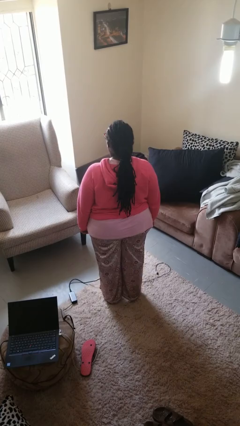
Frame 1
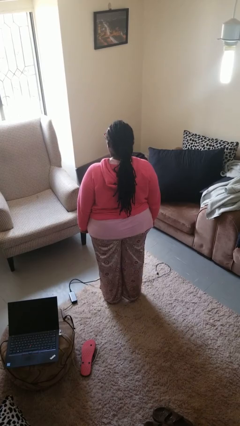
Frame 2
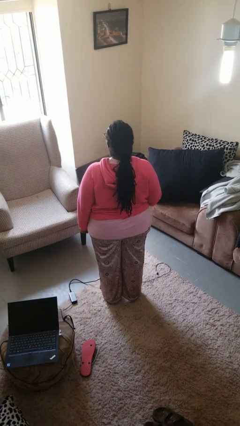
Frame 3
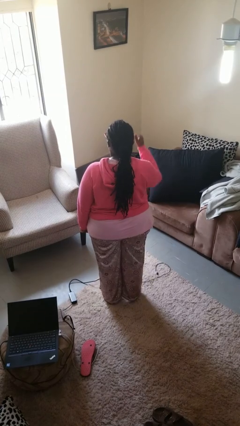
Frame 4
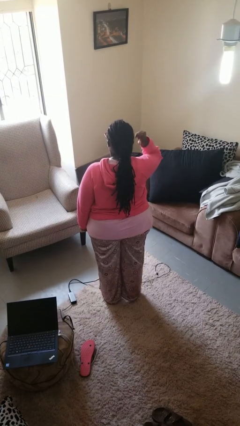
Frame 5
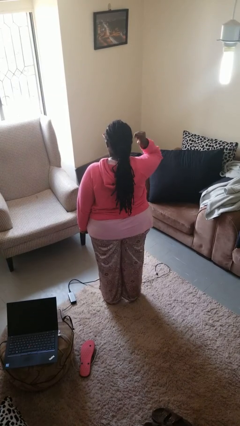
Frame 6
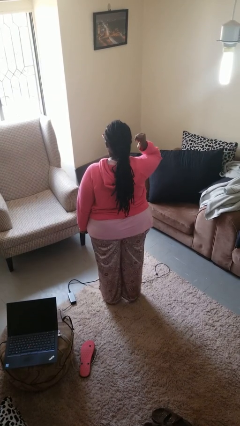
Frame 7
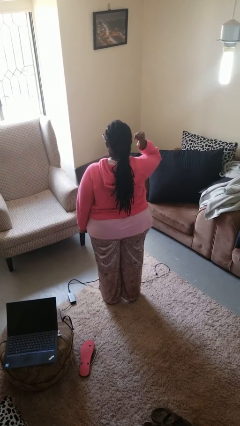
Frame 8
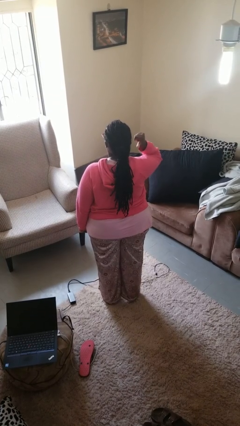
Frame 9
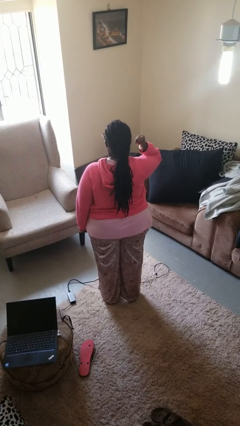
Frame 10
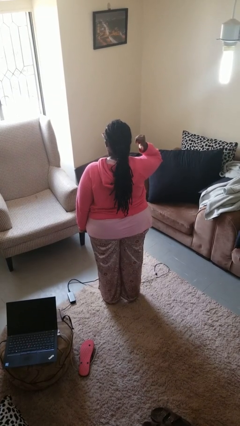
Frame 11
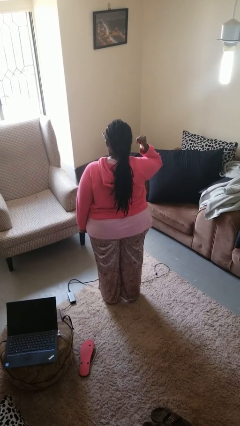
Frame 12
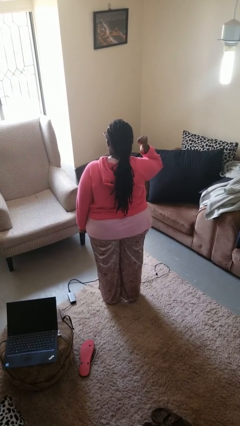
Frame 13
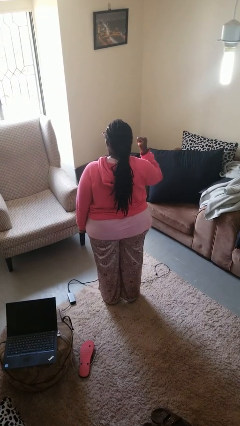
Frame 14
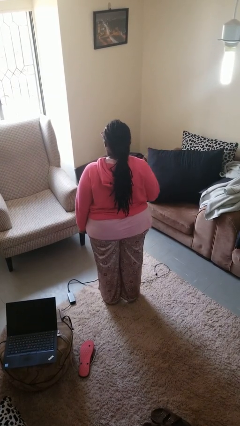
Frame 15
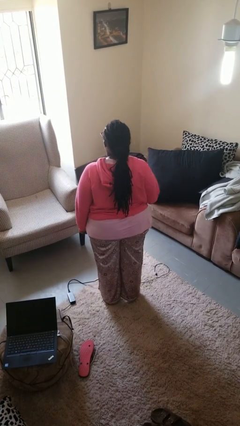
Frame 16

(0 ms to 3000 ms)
person gestures behind me

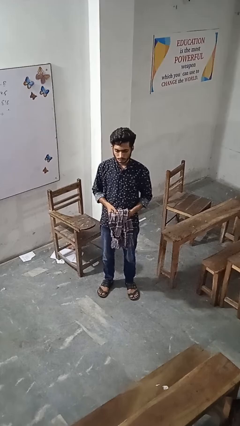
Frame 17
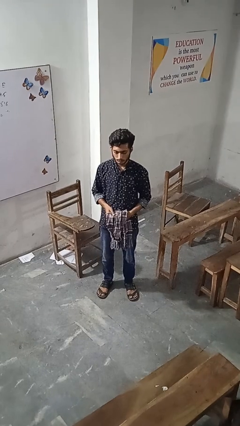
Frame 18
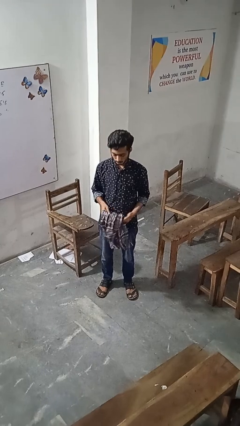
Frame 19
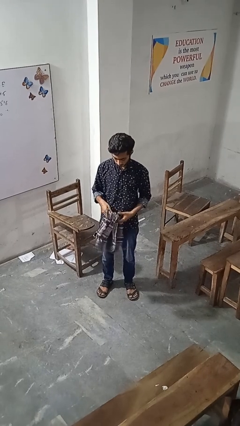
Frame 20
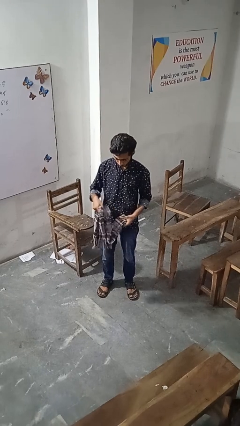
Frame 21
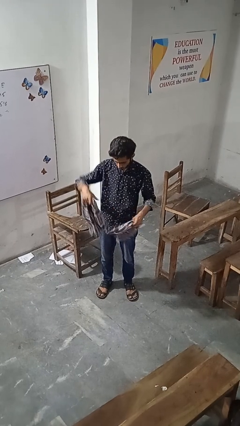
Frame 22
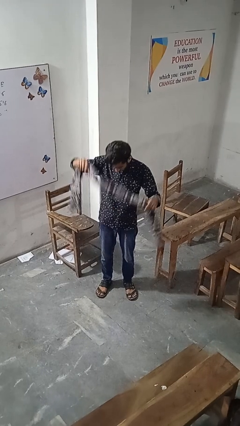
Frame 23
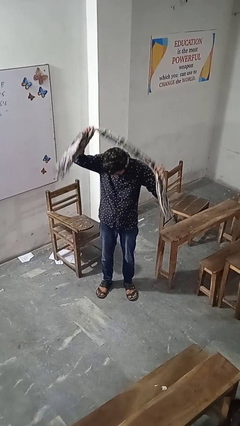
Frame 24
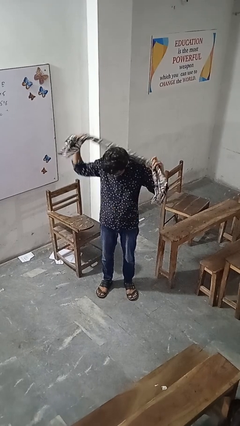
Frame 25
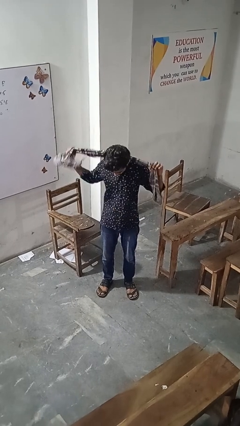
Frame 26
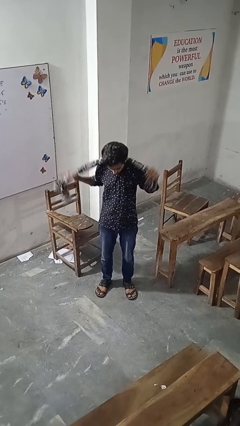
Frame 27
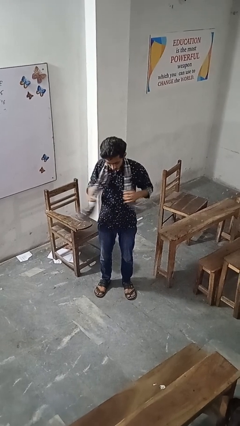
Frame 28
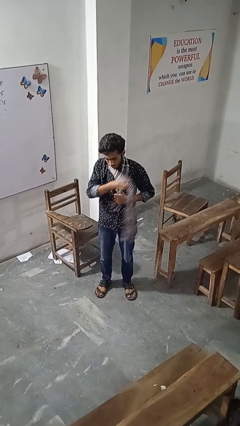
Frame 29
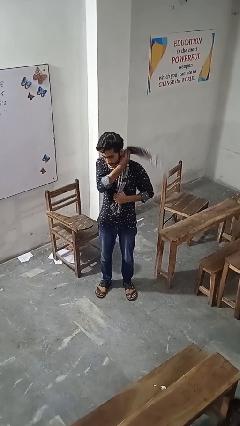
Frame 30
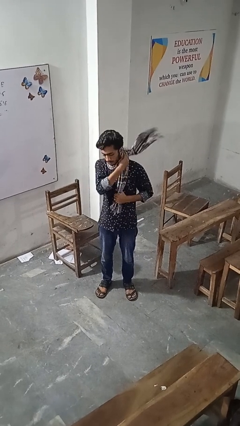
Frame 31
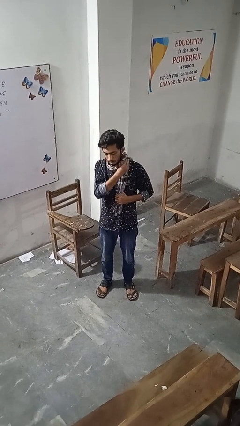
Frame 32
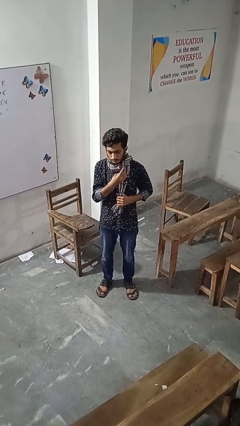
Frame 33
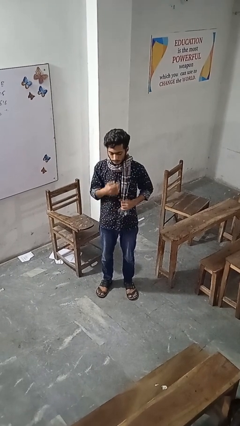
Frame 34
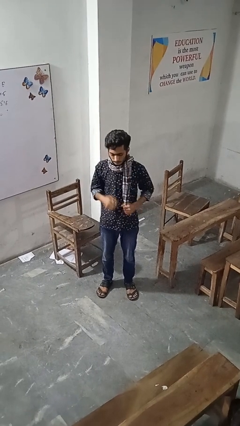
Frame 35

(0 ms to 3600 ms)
person puts on scarf

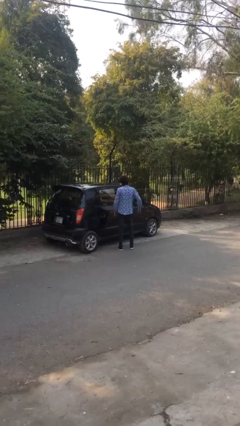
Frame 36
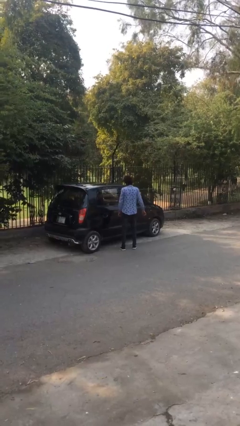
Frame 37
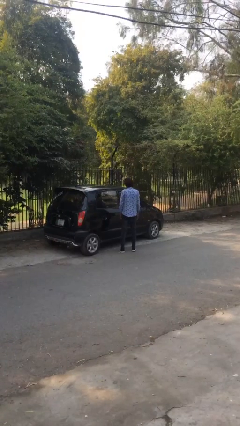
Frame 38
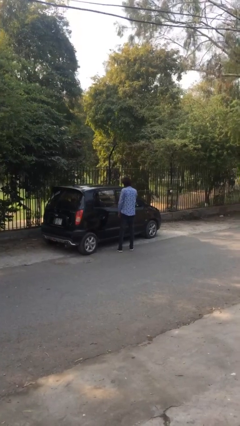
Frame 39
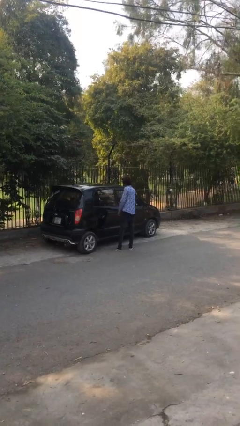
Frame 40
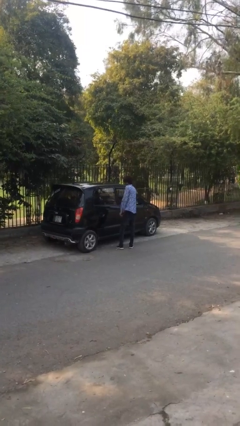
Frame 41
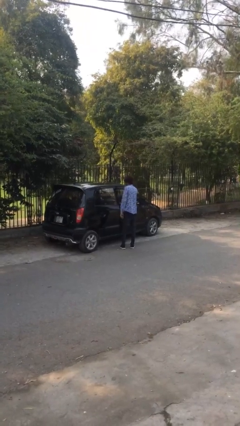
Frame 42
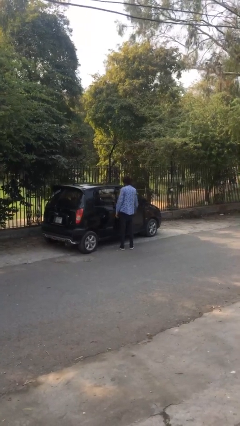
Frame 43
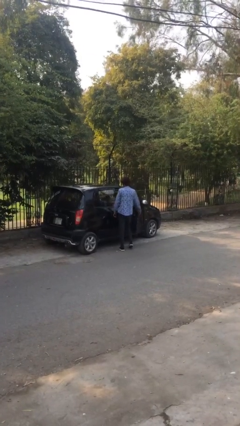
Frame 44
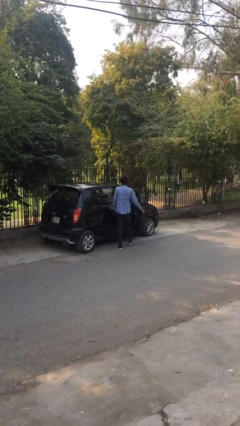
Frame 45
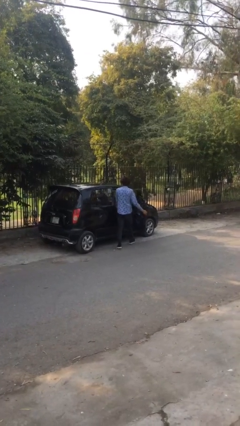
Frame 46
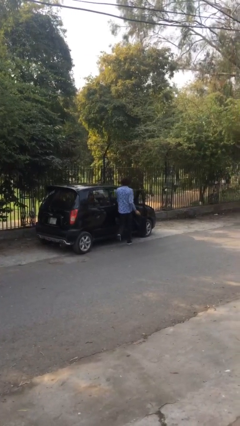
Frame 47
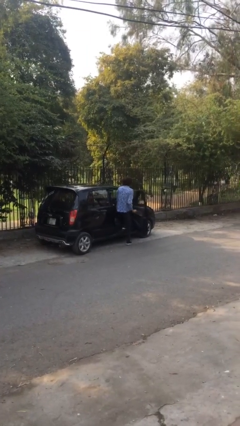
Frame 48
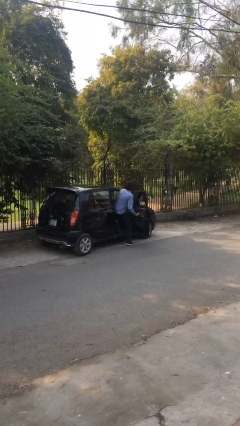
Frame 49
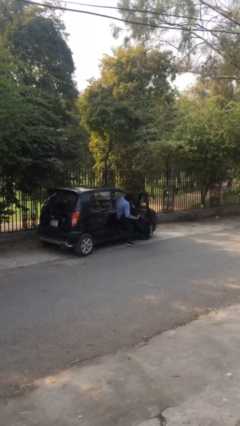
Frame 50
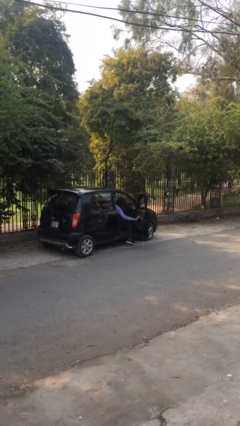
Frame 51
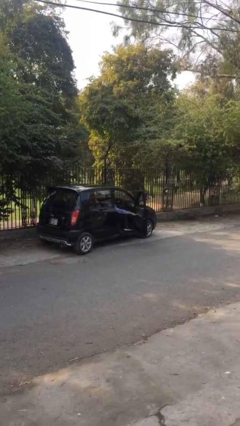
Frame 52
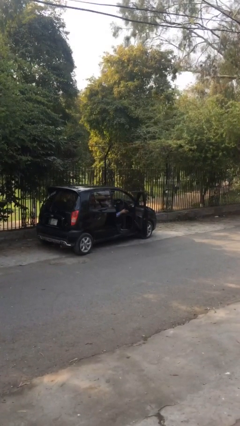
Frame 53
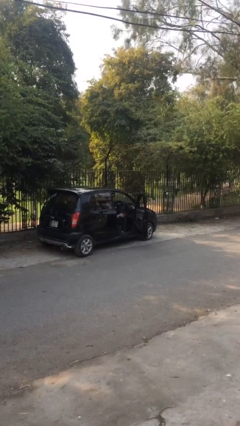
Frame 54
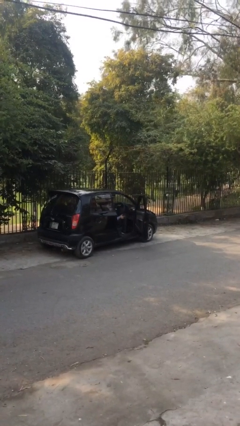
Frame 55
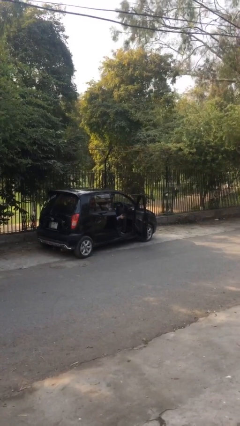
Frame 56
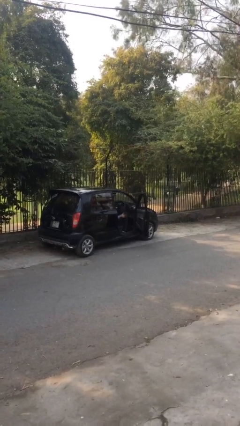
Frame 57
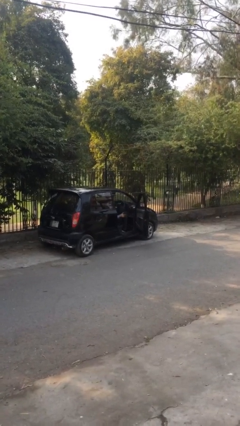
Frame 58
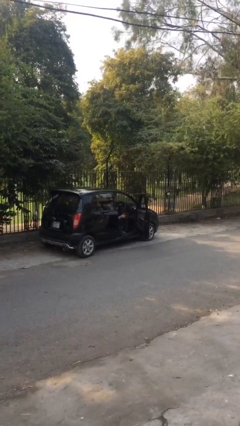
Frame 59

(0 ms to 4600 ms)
person enters car

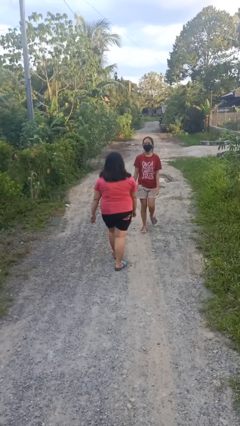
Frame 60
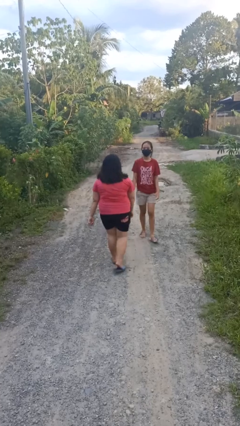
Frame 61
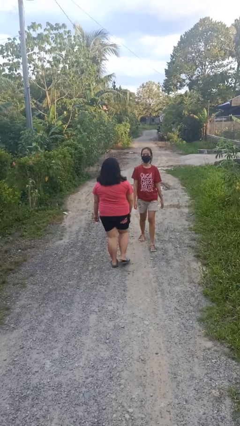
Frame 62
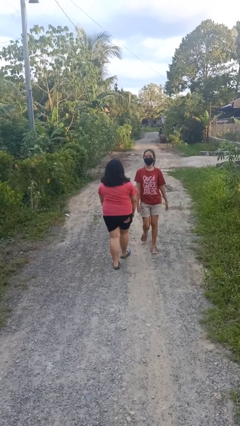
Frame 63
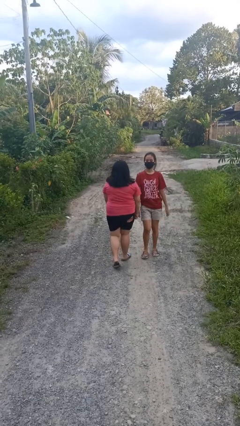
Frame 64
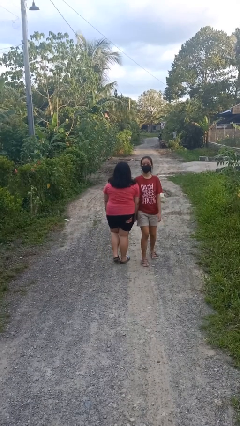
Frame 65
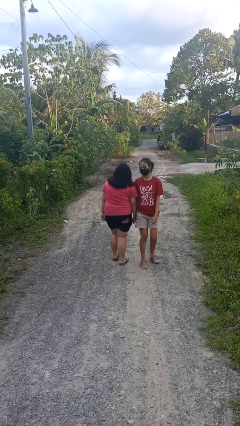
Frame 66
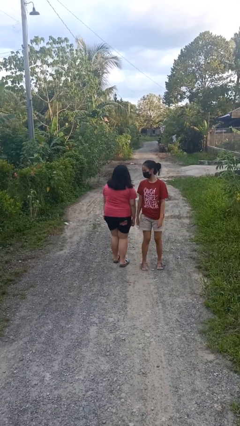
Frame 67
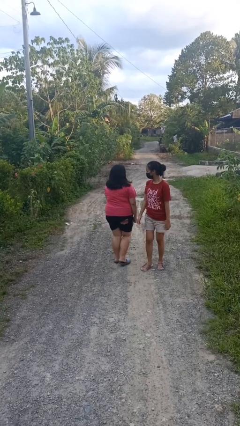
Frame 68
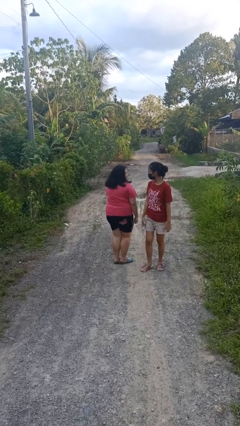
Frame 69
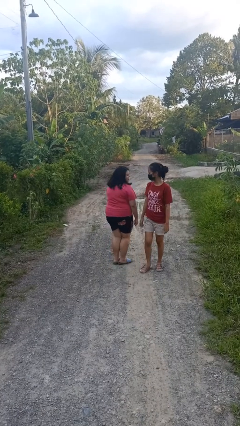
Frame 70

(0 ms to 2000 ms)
person bumps into person

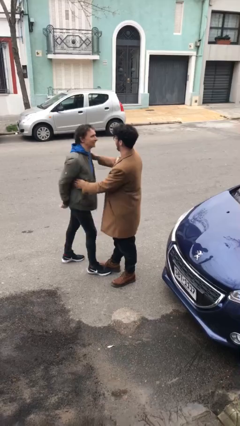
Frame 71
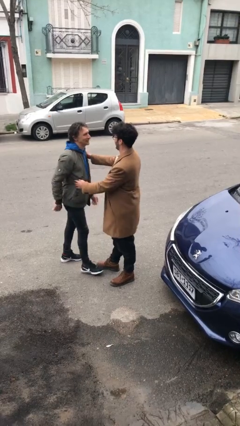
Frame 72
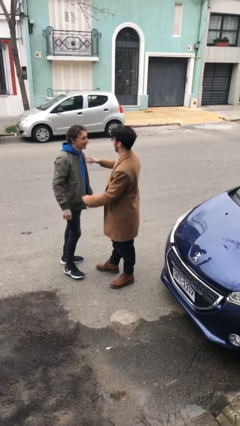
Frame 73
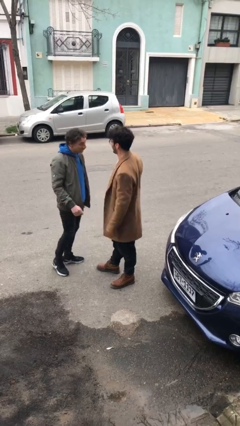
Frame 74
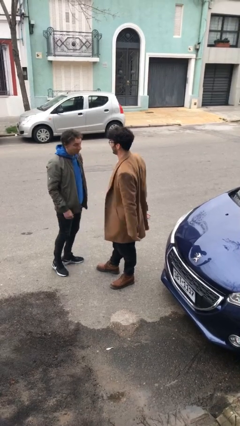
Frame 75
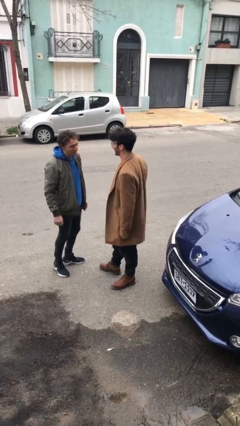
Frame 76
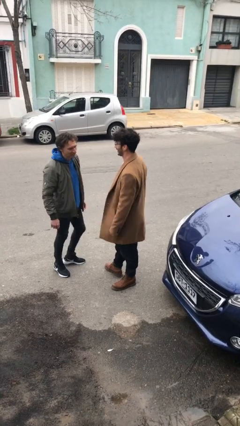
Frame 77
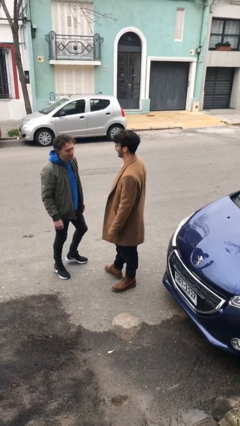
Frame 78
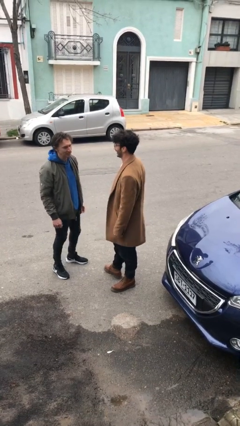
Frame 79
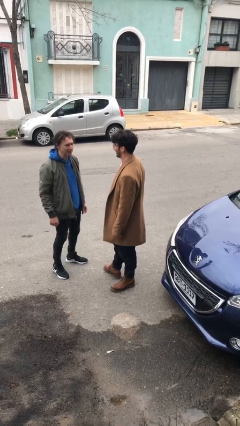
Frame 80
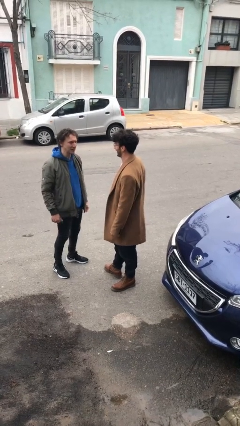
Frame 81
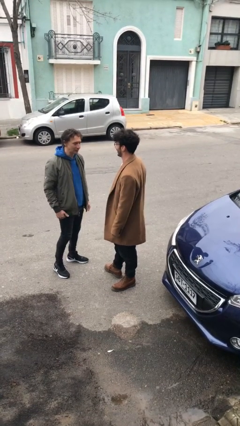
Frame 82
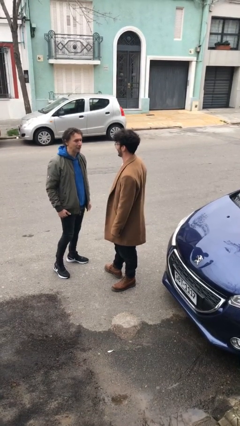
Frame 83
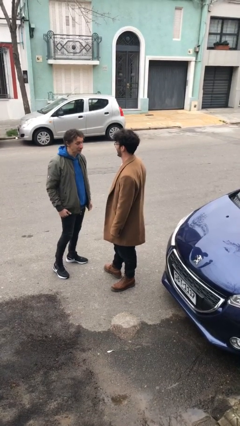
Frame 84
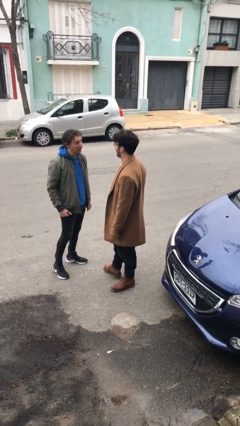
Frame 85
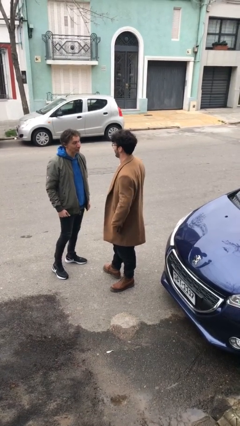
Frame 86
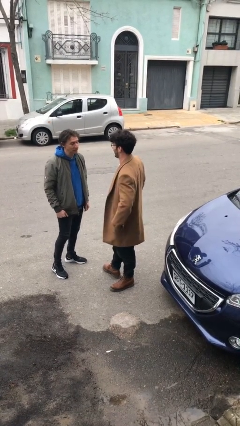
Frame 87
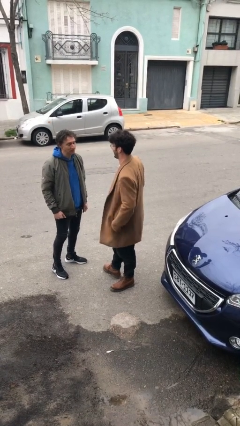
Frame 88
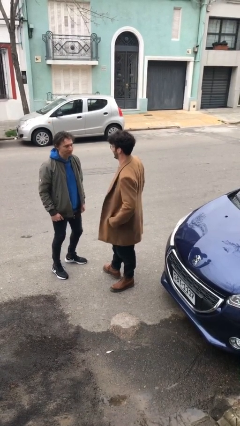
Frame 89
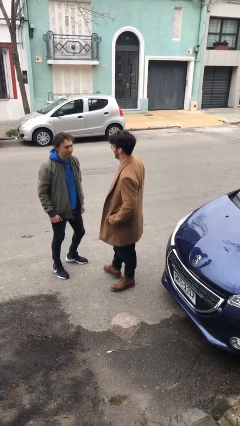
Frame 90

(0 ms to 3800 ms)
person talks to person

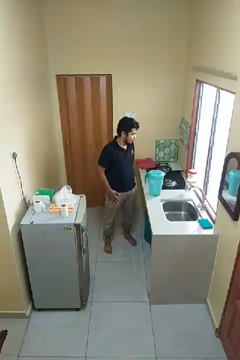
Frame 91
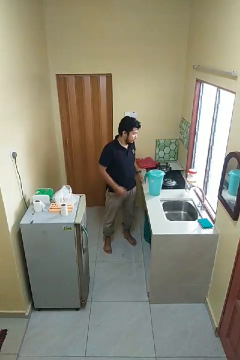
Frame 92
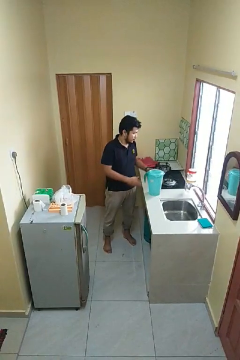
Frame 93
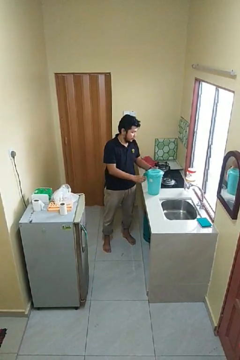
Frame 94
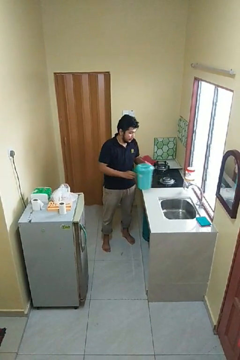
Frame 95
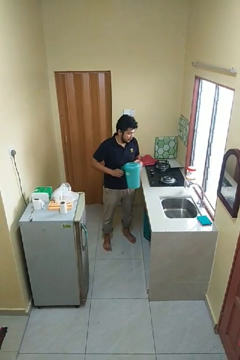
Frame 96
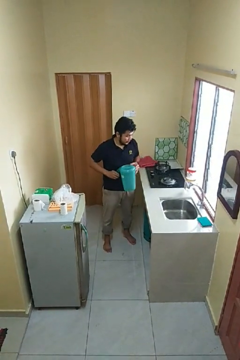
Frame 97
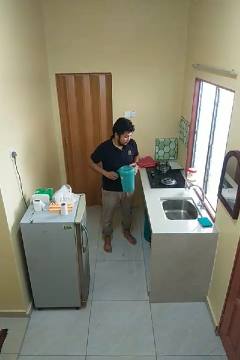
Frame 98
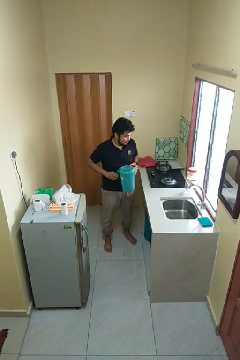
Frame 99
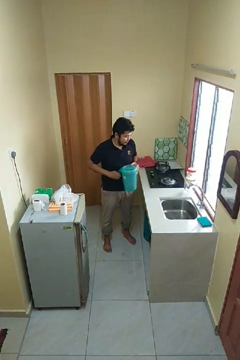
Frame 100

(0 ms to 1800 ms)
person picks up object from countertop
